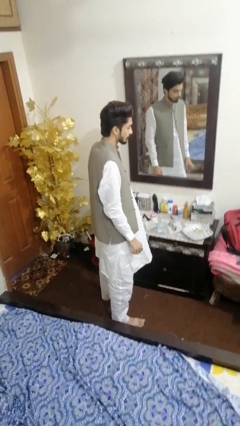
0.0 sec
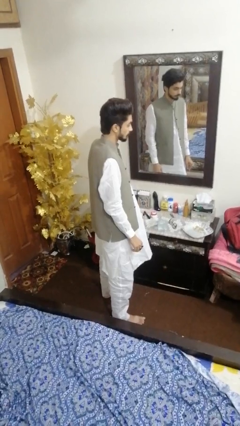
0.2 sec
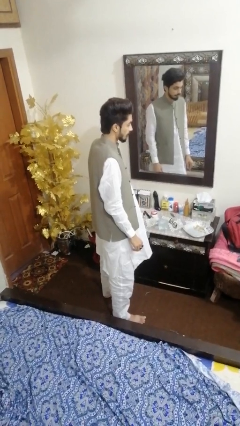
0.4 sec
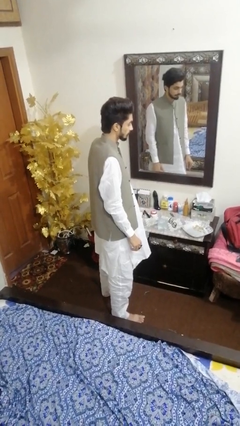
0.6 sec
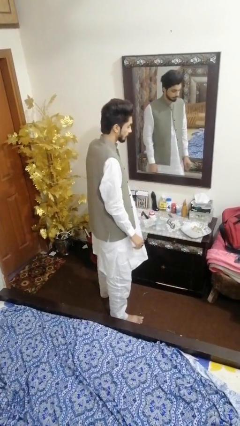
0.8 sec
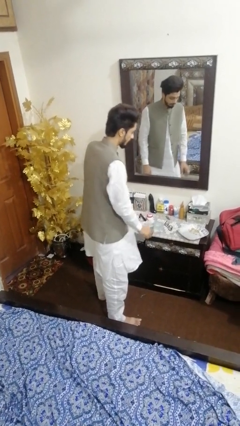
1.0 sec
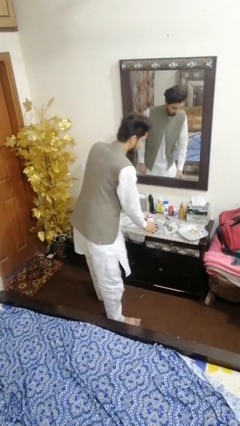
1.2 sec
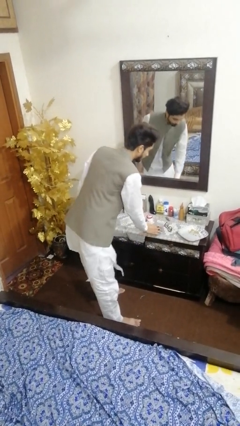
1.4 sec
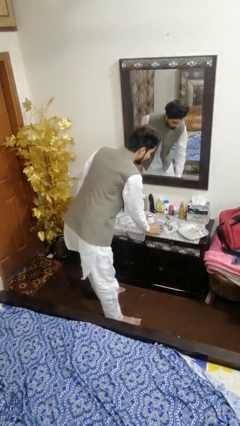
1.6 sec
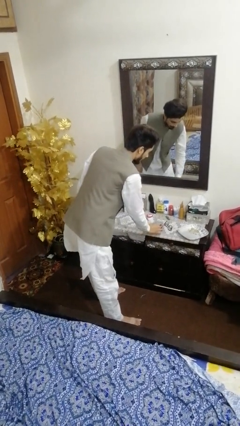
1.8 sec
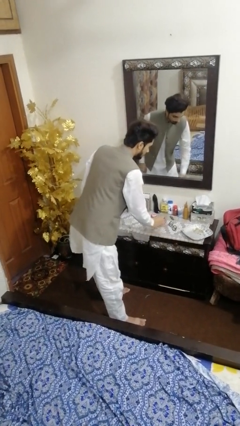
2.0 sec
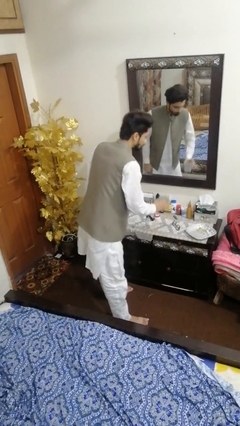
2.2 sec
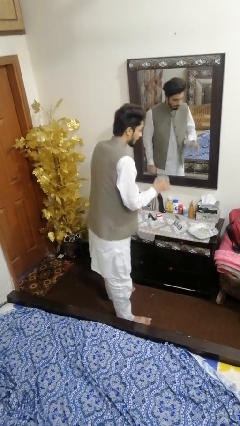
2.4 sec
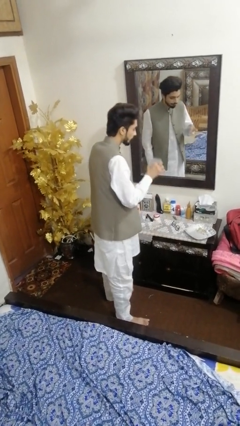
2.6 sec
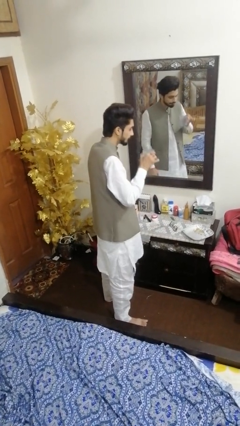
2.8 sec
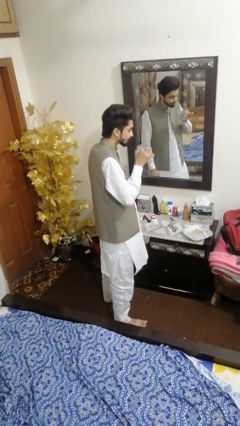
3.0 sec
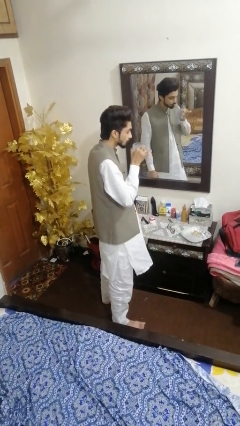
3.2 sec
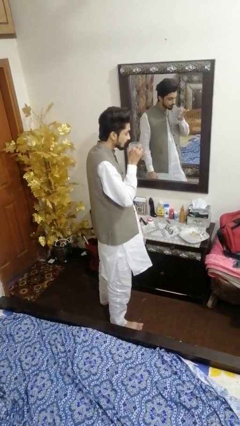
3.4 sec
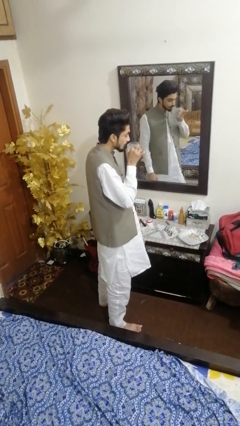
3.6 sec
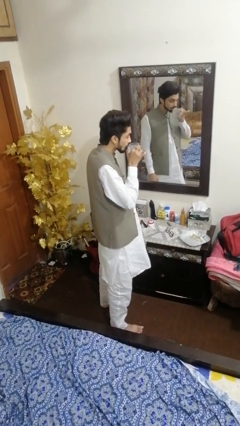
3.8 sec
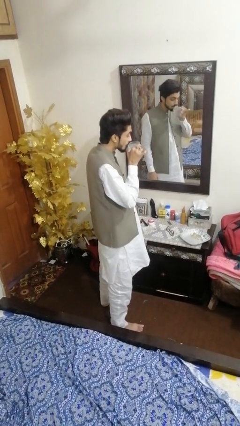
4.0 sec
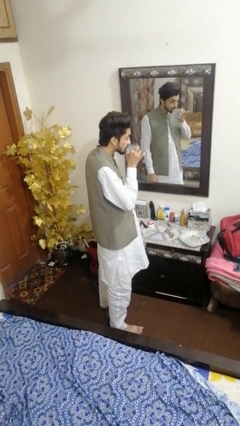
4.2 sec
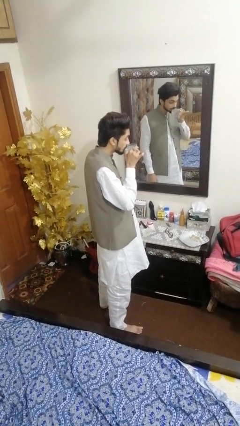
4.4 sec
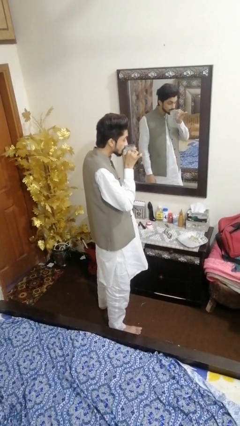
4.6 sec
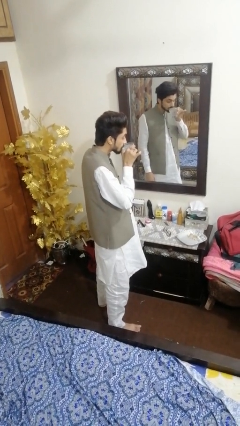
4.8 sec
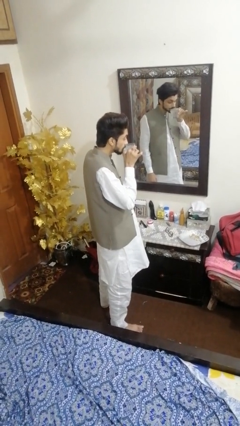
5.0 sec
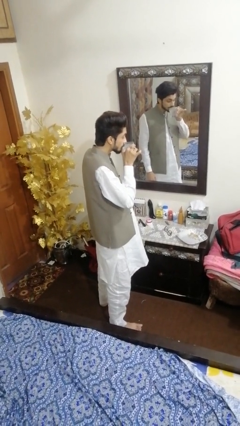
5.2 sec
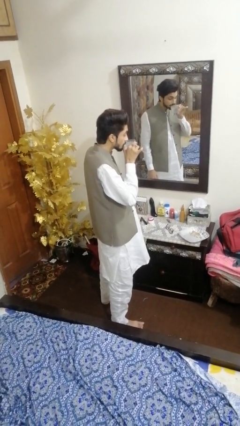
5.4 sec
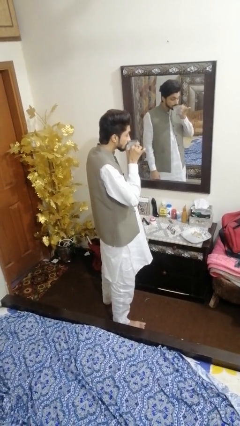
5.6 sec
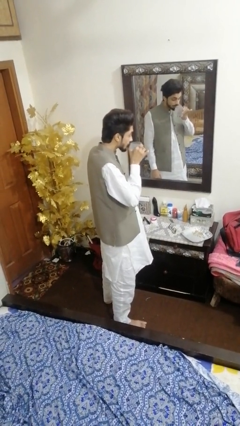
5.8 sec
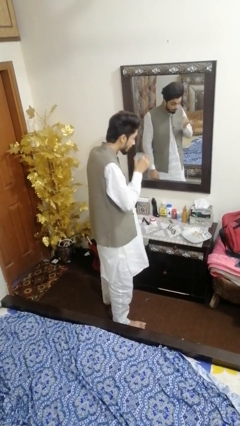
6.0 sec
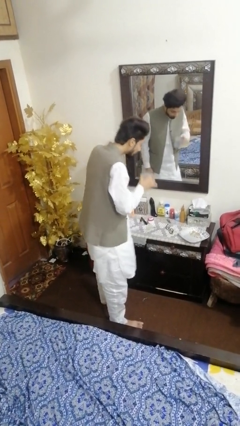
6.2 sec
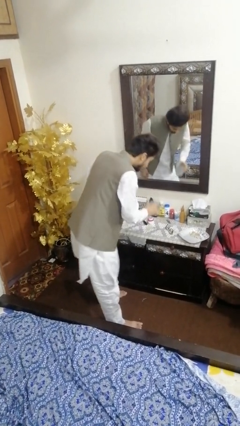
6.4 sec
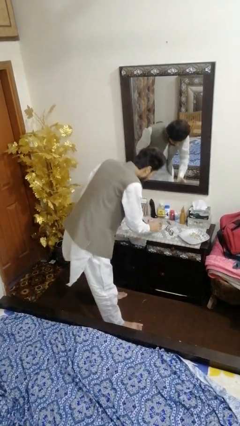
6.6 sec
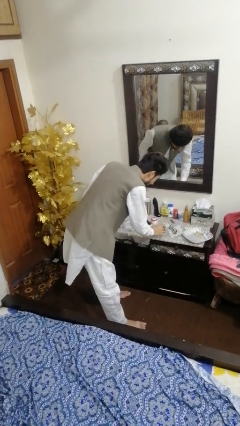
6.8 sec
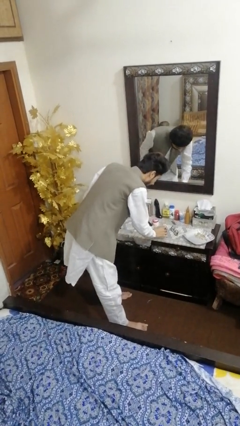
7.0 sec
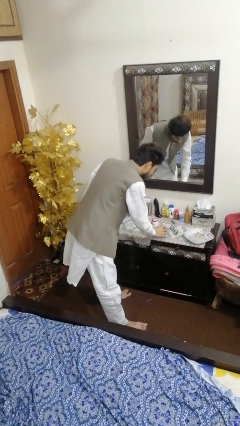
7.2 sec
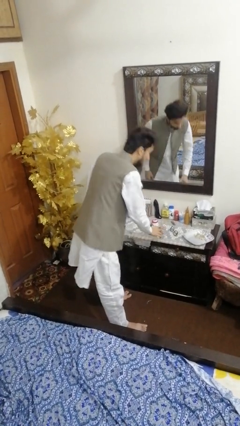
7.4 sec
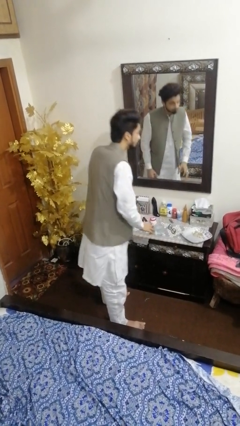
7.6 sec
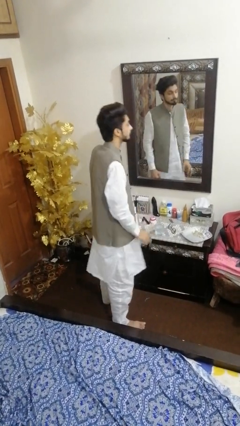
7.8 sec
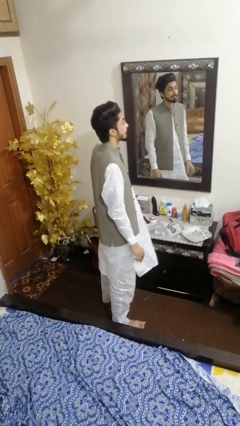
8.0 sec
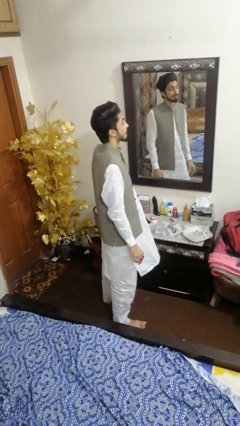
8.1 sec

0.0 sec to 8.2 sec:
person drinks from cup

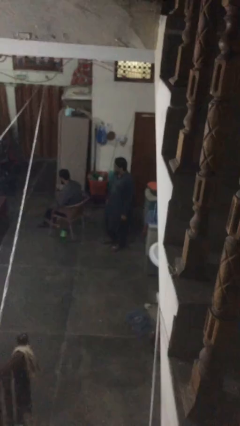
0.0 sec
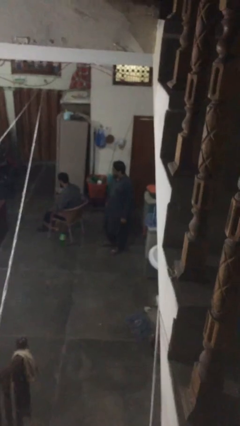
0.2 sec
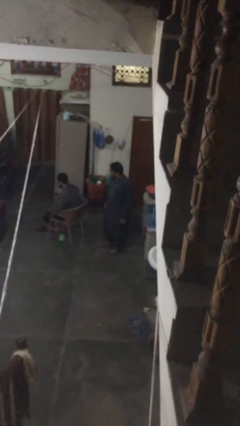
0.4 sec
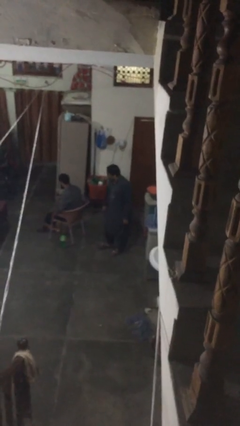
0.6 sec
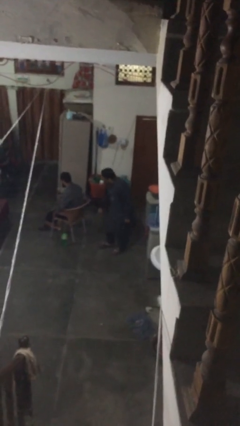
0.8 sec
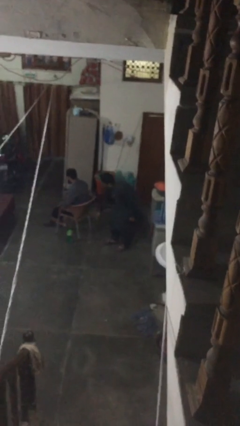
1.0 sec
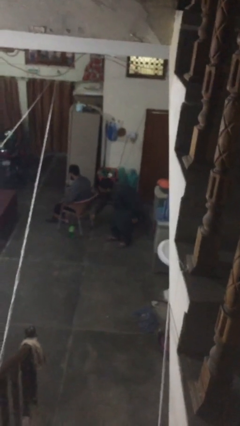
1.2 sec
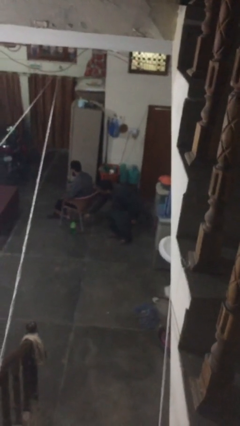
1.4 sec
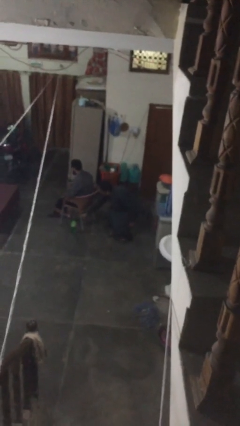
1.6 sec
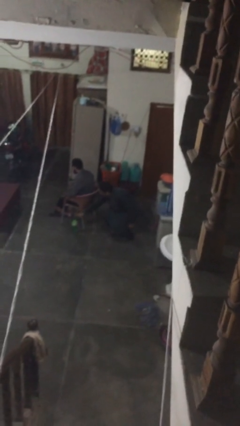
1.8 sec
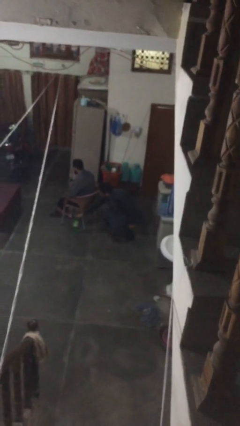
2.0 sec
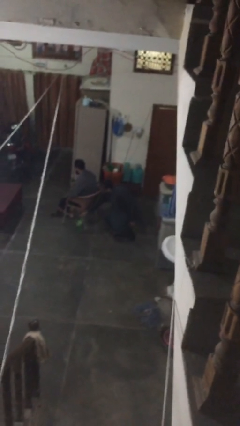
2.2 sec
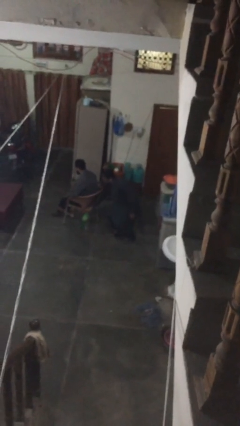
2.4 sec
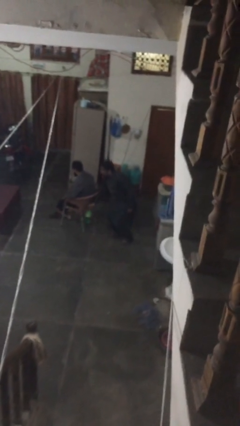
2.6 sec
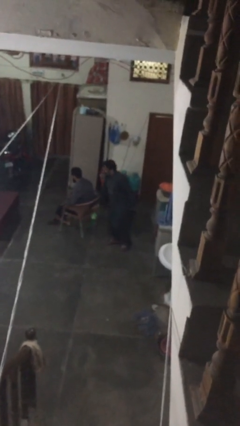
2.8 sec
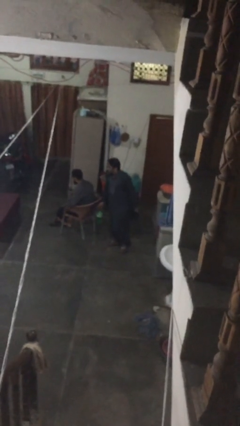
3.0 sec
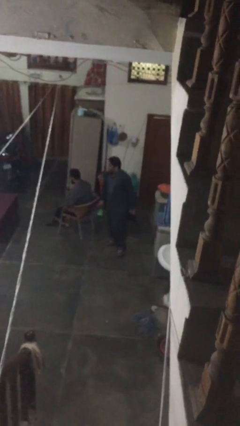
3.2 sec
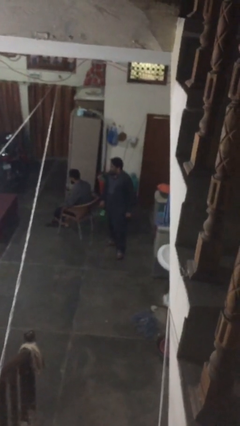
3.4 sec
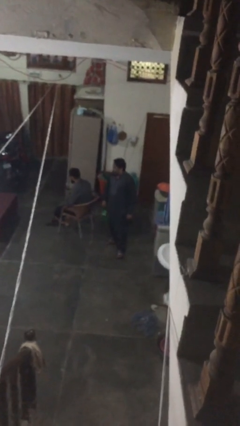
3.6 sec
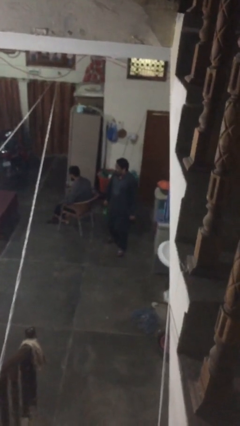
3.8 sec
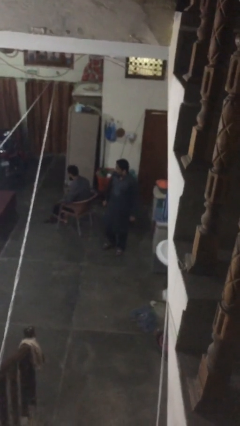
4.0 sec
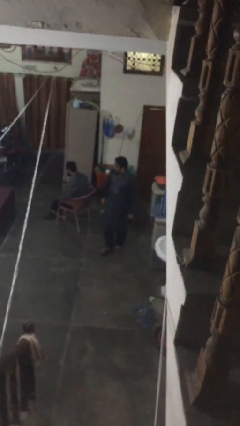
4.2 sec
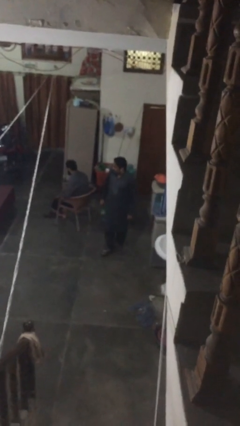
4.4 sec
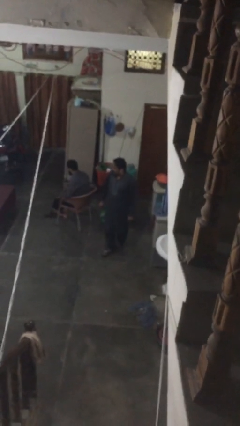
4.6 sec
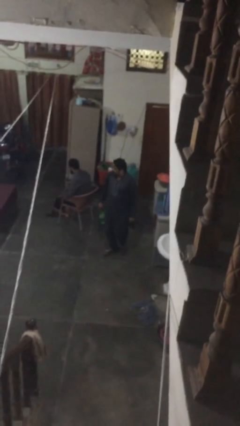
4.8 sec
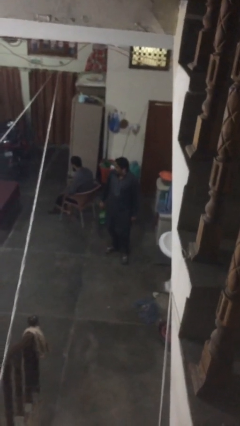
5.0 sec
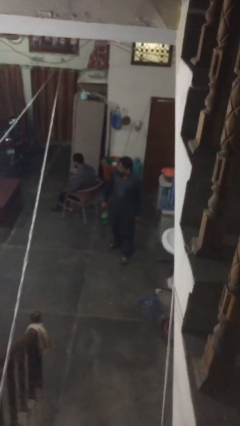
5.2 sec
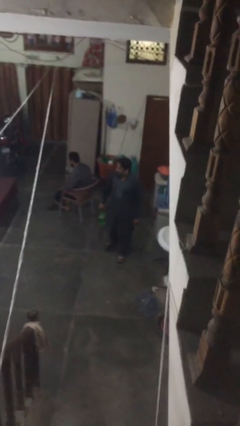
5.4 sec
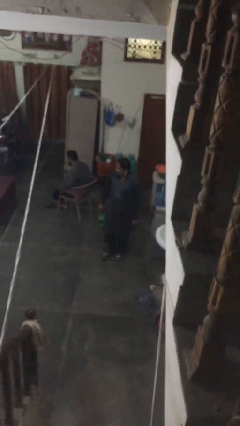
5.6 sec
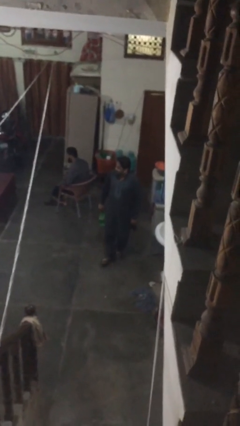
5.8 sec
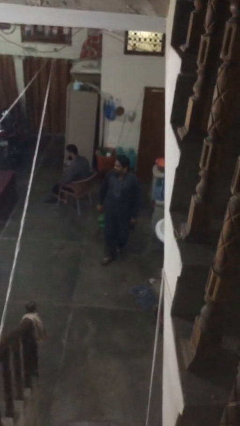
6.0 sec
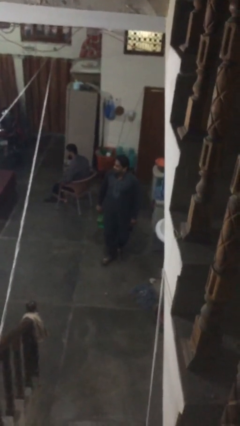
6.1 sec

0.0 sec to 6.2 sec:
person steals object from person

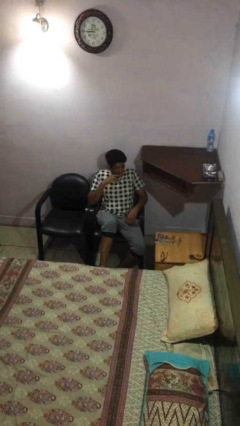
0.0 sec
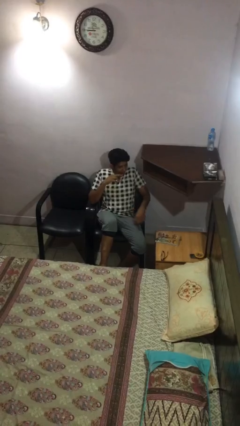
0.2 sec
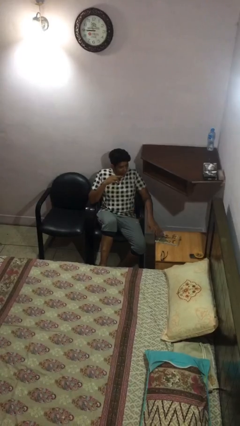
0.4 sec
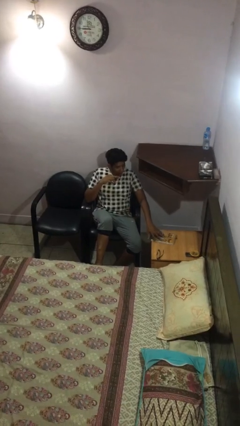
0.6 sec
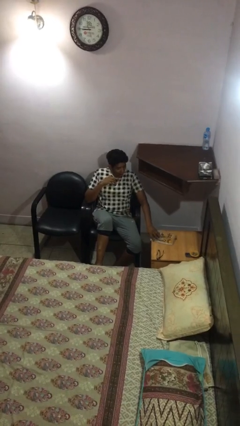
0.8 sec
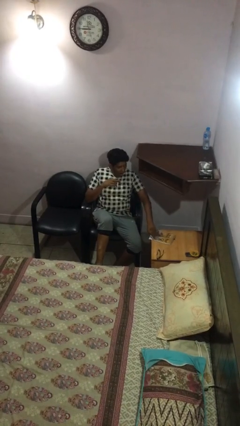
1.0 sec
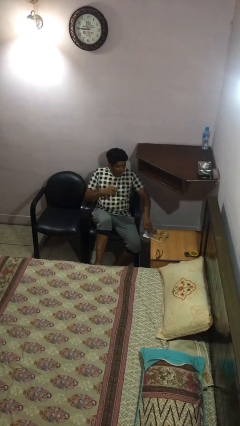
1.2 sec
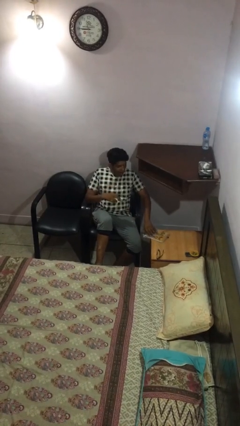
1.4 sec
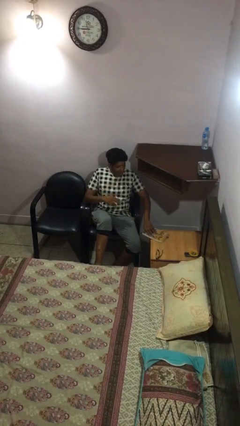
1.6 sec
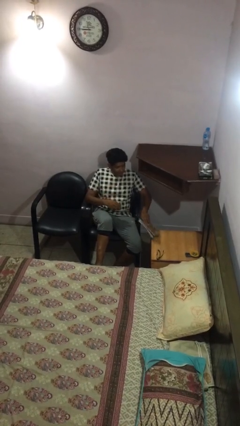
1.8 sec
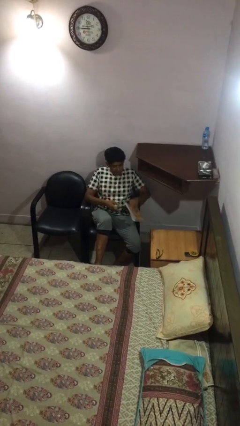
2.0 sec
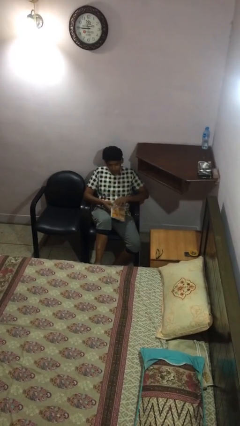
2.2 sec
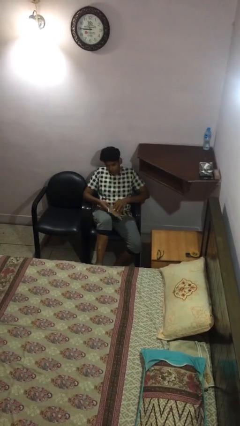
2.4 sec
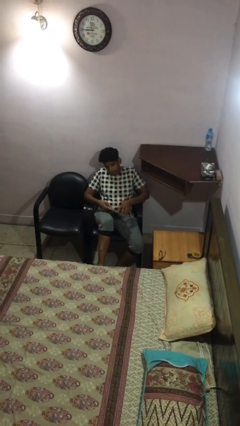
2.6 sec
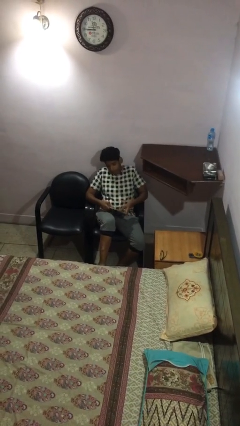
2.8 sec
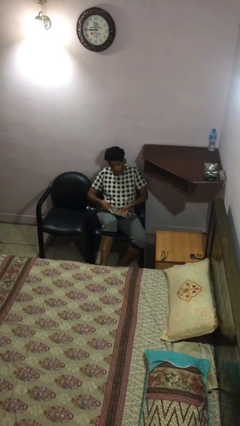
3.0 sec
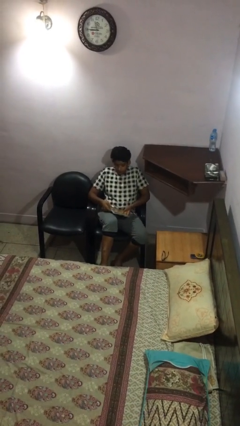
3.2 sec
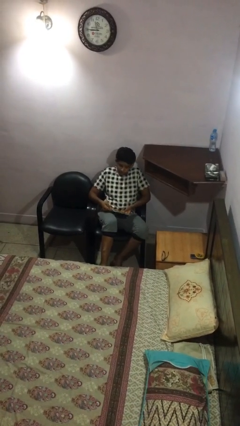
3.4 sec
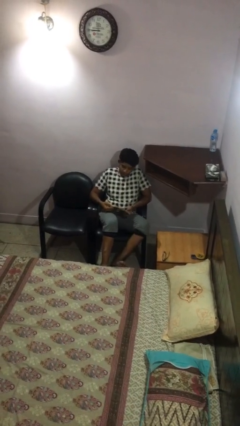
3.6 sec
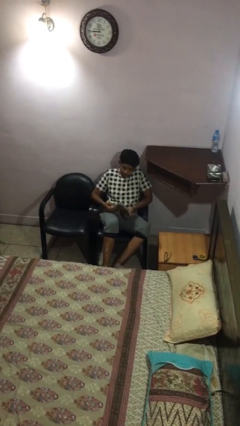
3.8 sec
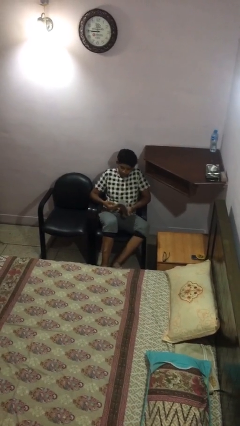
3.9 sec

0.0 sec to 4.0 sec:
person picks up object from table
